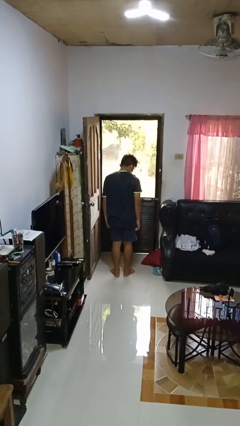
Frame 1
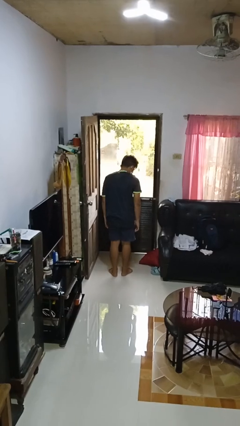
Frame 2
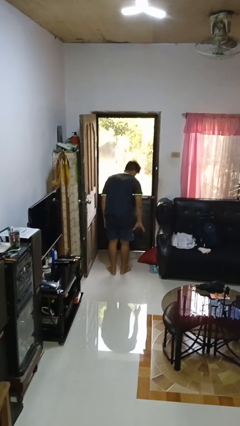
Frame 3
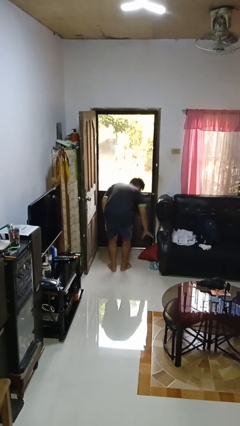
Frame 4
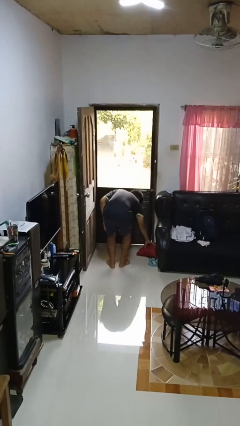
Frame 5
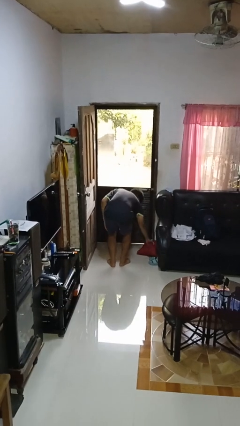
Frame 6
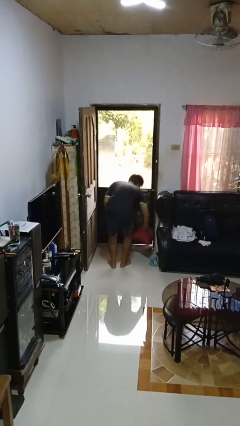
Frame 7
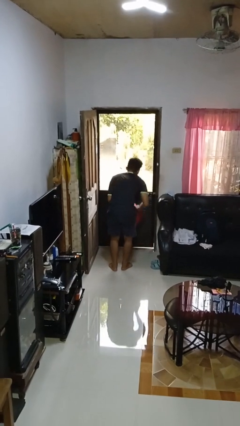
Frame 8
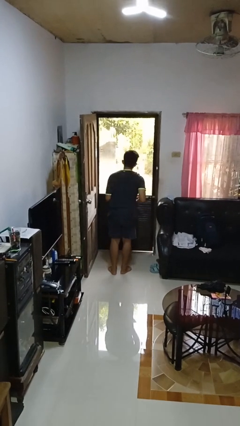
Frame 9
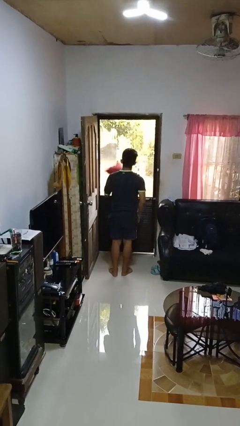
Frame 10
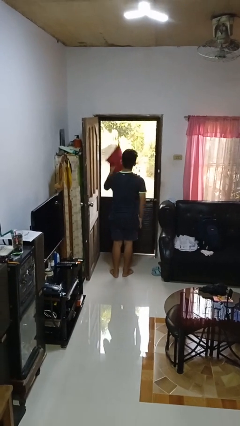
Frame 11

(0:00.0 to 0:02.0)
person picks up object from floor

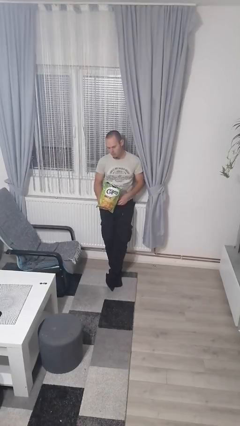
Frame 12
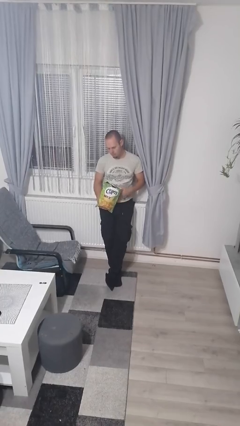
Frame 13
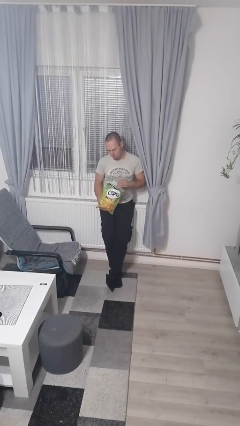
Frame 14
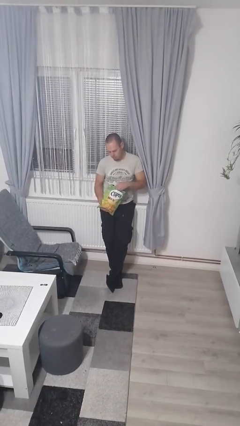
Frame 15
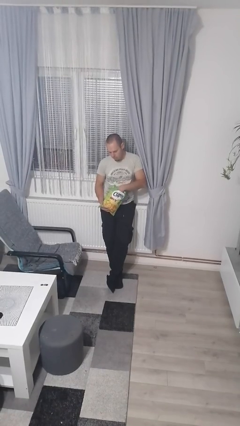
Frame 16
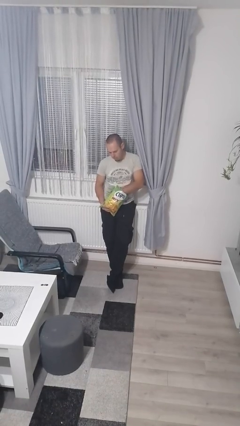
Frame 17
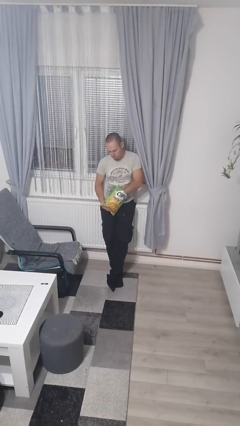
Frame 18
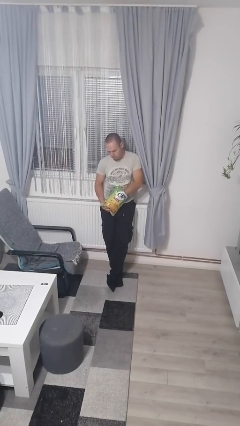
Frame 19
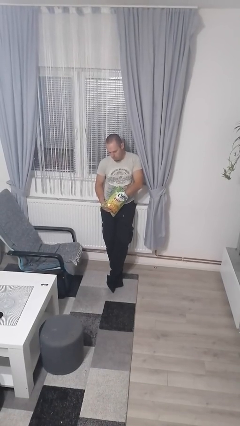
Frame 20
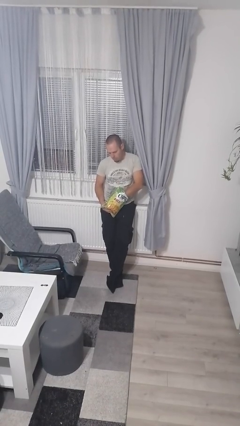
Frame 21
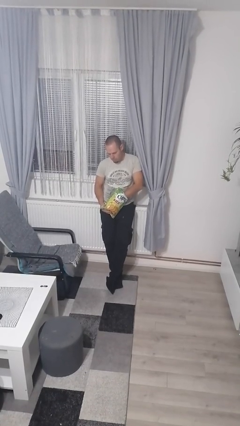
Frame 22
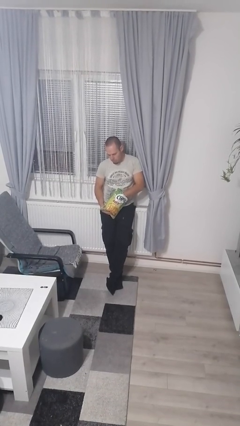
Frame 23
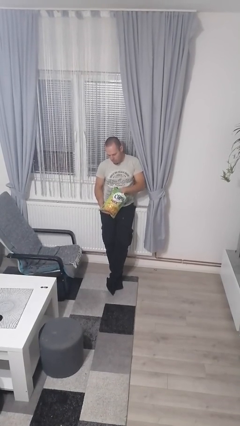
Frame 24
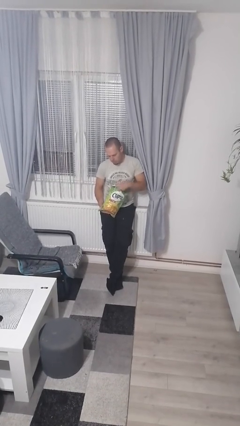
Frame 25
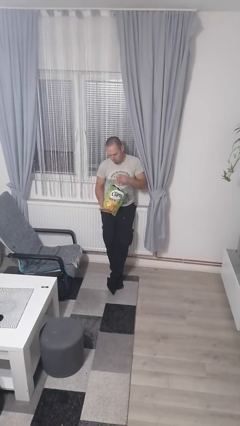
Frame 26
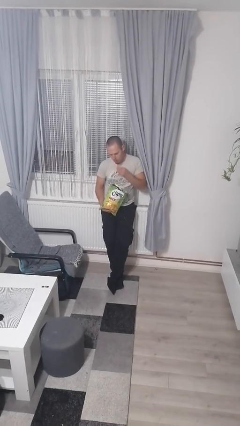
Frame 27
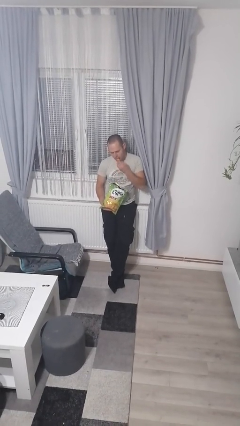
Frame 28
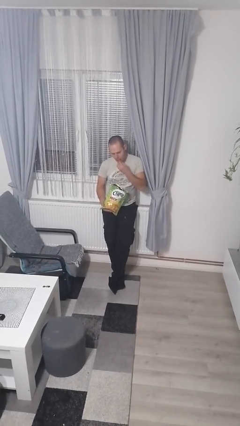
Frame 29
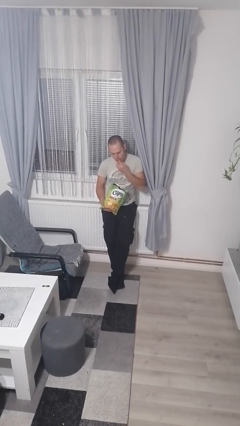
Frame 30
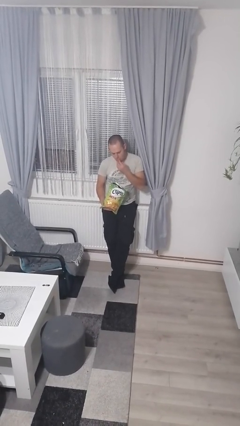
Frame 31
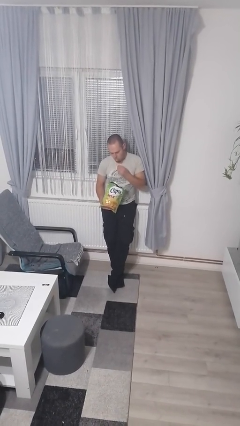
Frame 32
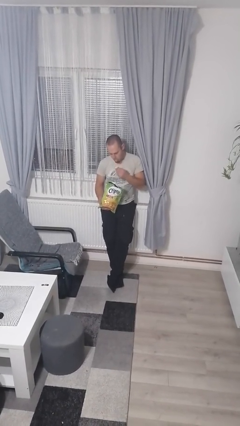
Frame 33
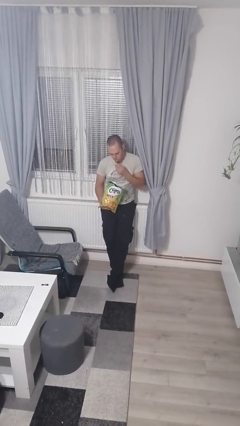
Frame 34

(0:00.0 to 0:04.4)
person eats snack from bag

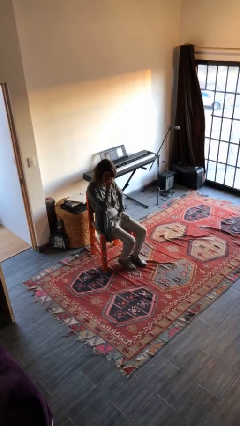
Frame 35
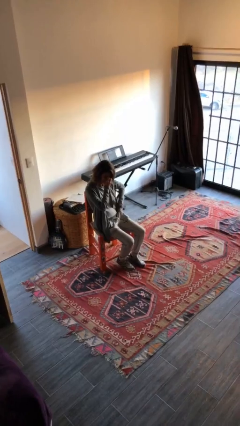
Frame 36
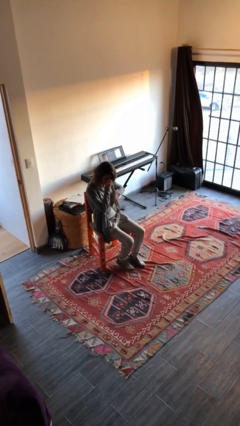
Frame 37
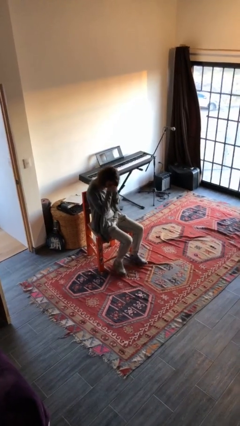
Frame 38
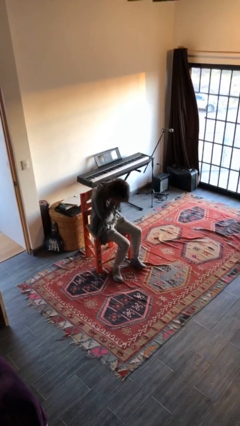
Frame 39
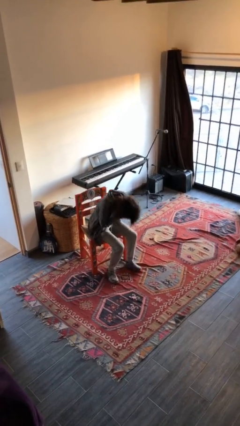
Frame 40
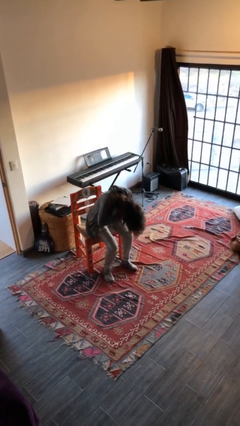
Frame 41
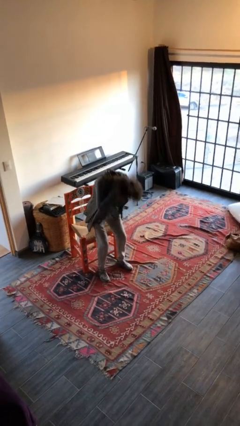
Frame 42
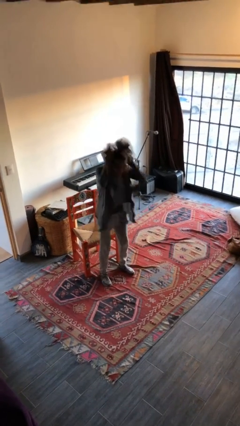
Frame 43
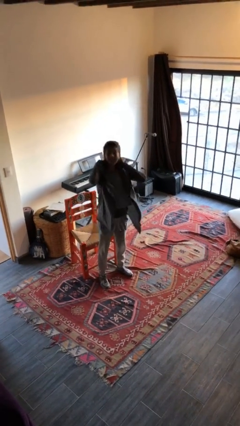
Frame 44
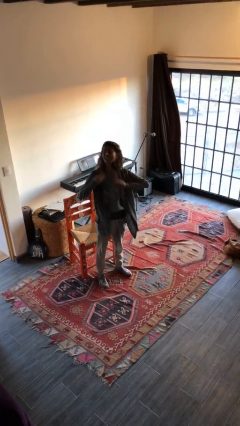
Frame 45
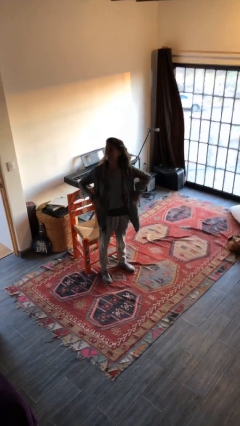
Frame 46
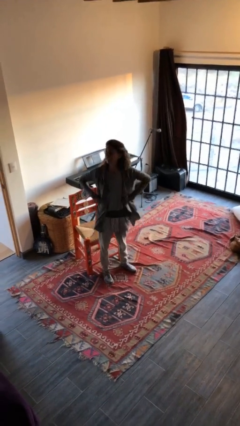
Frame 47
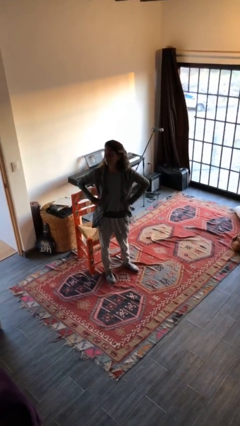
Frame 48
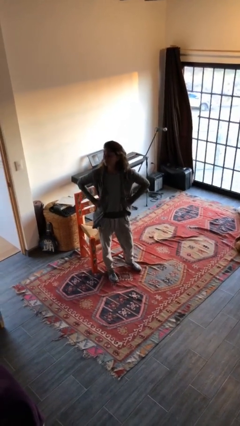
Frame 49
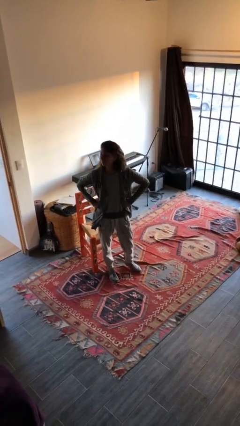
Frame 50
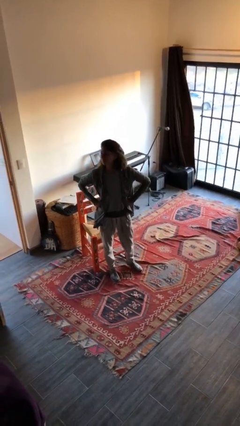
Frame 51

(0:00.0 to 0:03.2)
person stands up

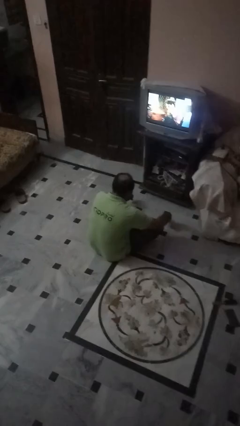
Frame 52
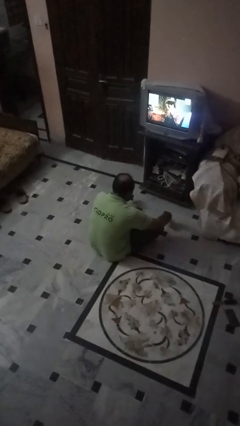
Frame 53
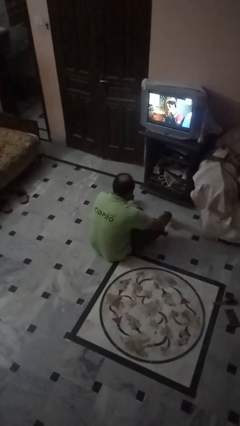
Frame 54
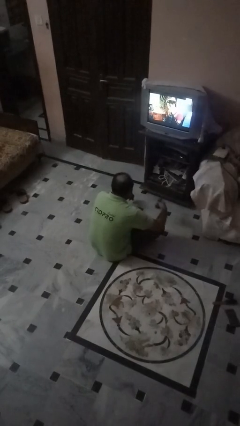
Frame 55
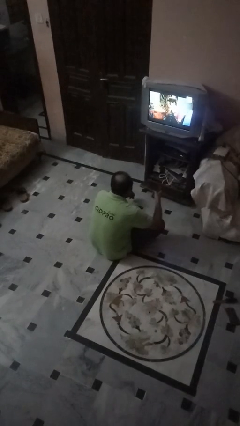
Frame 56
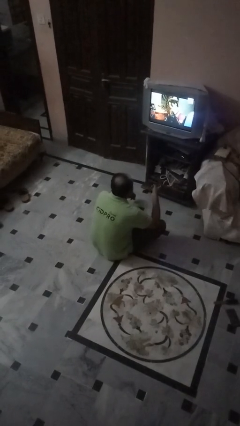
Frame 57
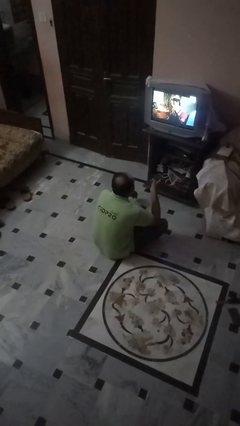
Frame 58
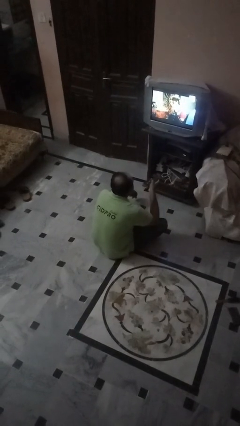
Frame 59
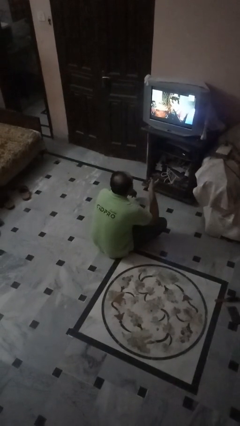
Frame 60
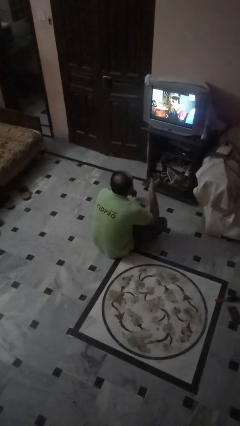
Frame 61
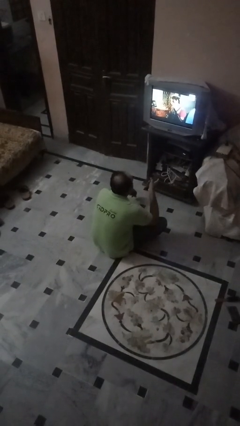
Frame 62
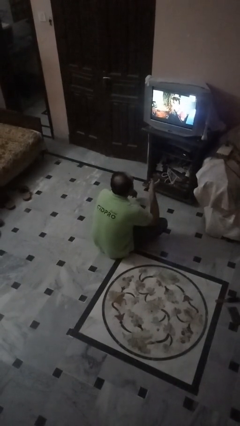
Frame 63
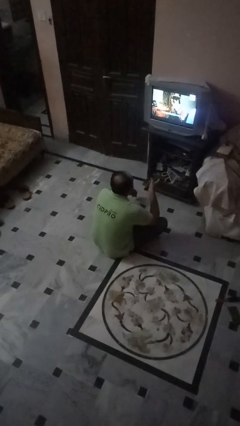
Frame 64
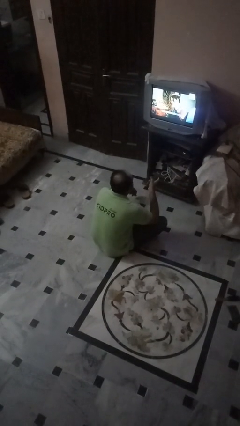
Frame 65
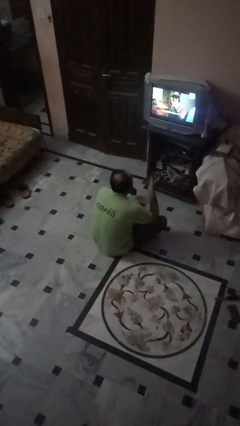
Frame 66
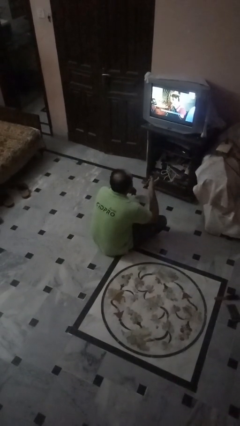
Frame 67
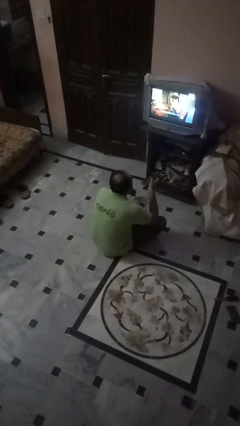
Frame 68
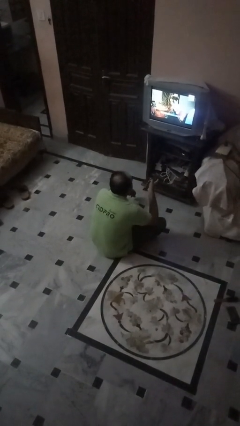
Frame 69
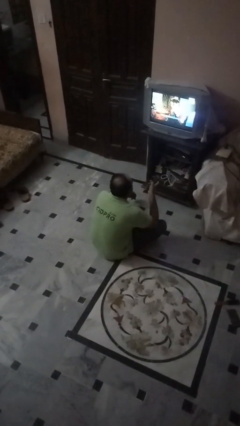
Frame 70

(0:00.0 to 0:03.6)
person uses television remote

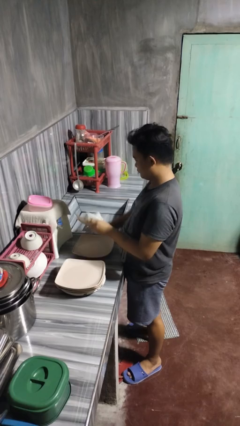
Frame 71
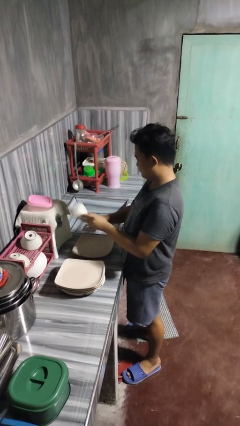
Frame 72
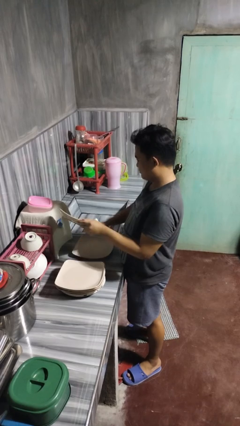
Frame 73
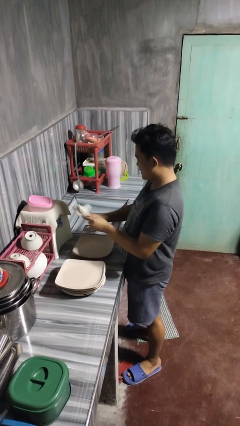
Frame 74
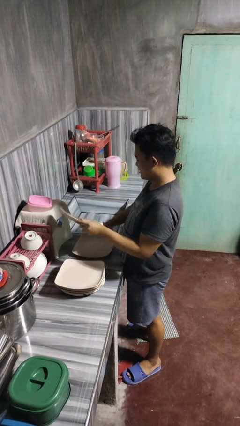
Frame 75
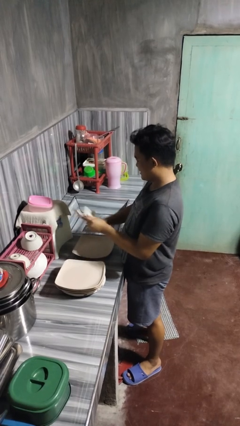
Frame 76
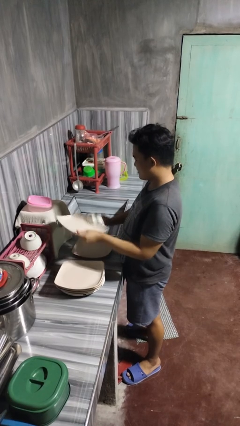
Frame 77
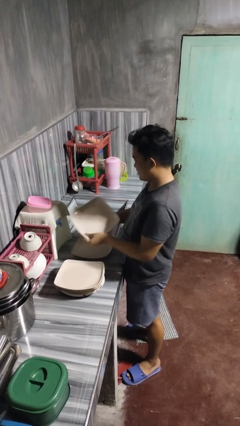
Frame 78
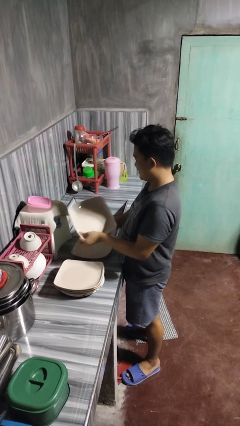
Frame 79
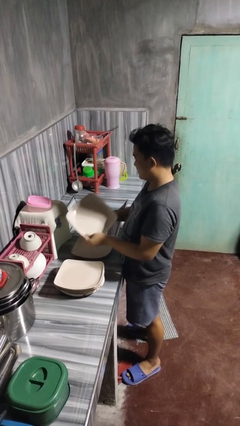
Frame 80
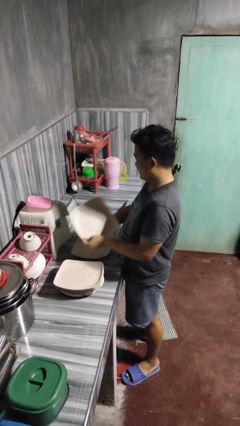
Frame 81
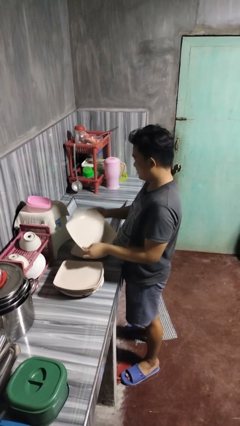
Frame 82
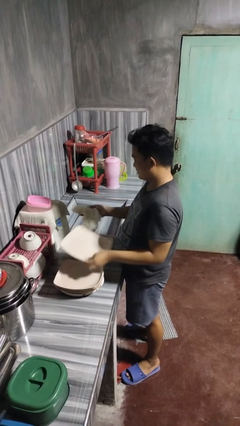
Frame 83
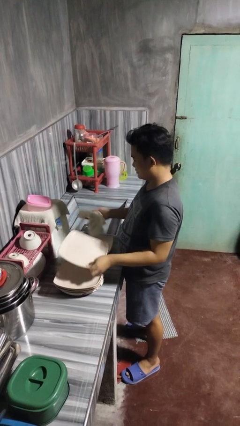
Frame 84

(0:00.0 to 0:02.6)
person dries dish

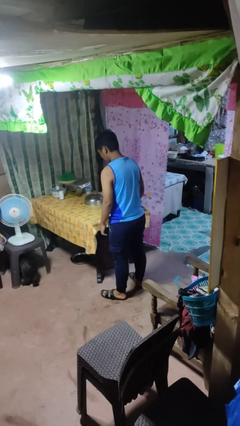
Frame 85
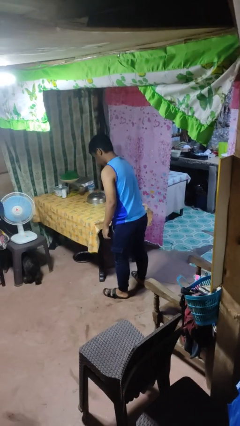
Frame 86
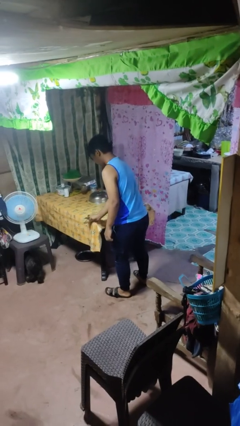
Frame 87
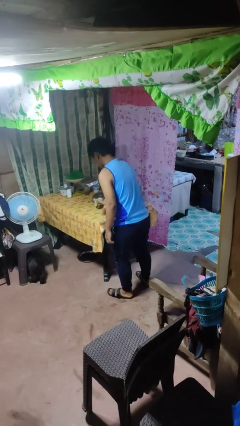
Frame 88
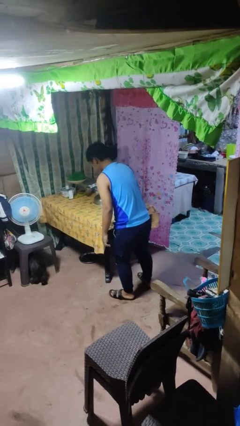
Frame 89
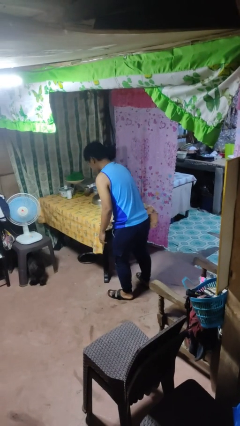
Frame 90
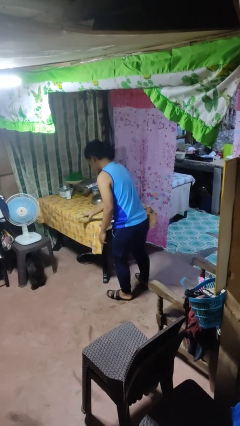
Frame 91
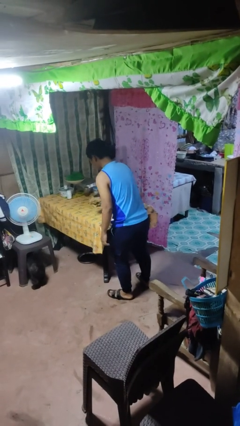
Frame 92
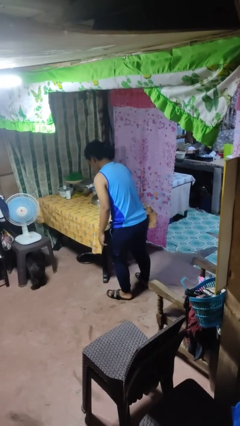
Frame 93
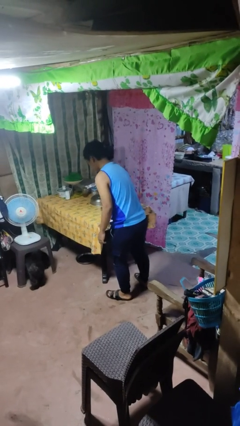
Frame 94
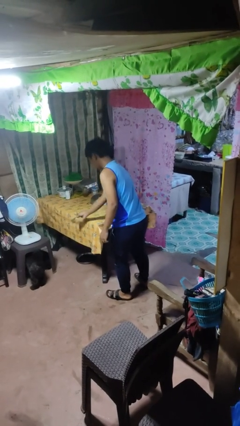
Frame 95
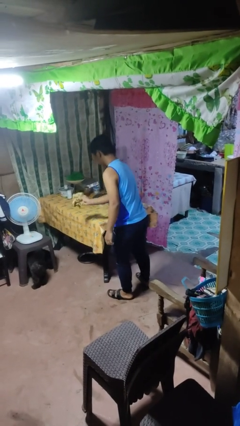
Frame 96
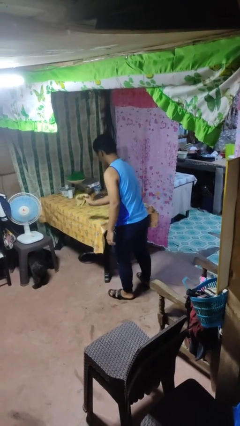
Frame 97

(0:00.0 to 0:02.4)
person cleans table with rag
